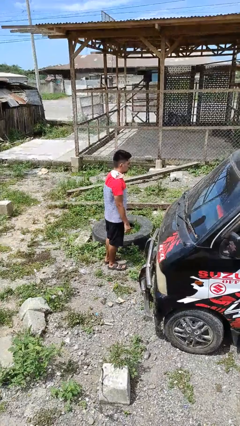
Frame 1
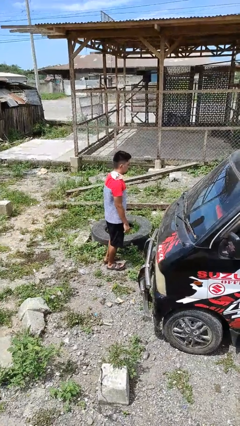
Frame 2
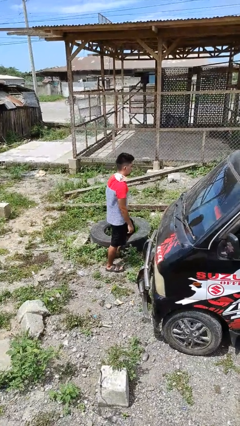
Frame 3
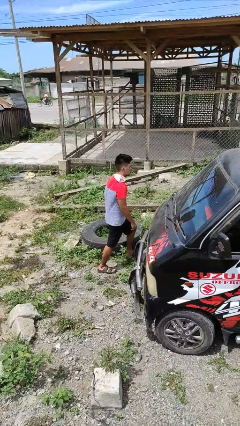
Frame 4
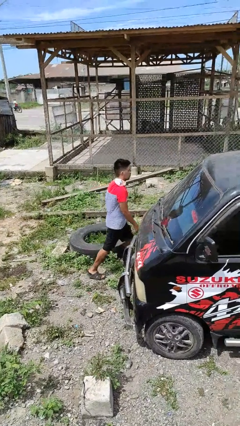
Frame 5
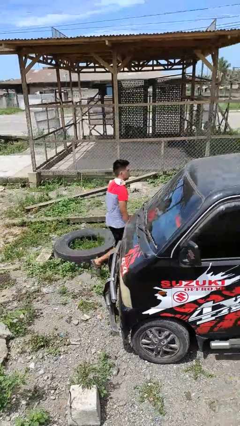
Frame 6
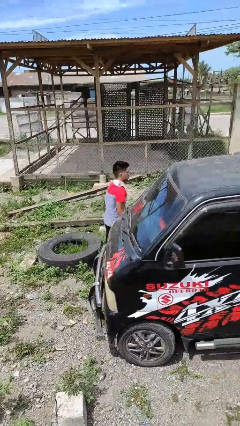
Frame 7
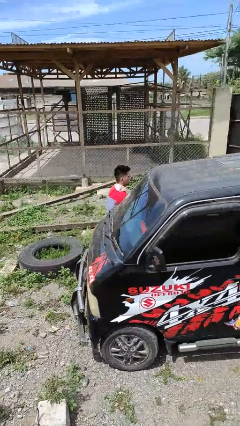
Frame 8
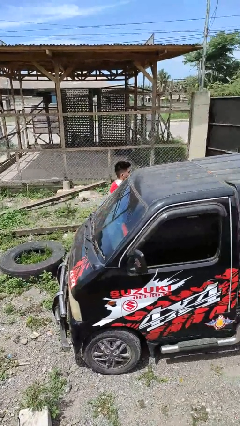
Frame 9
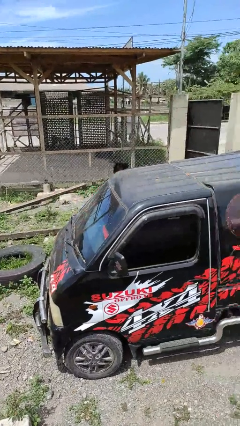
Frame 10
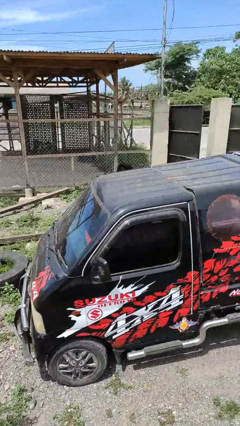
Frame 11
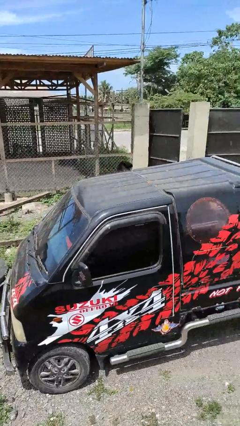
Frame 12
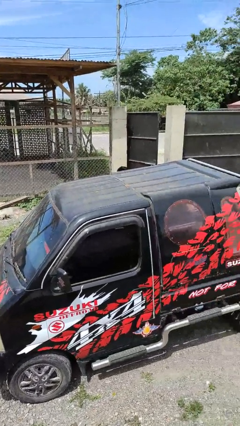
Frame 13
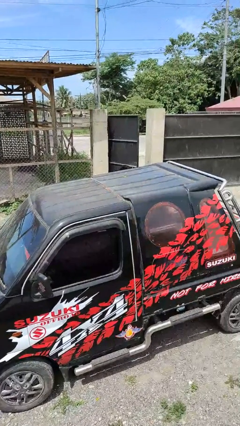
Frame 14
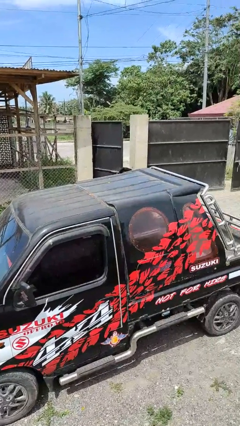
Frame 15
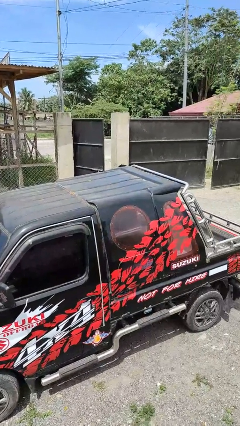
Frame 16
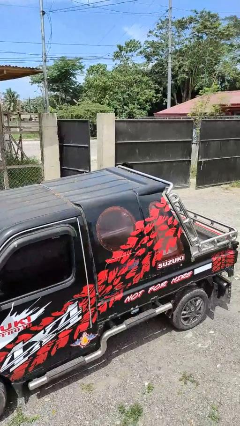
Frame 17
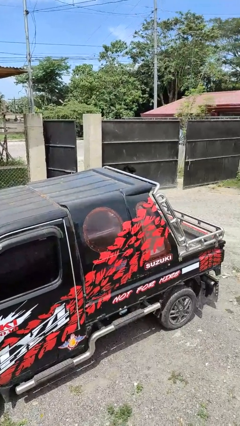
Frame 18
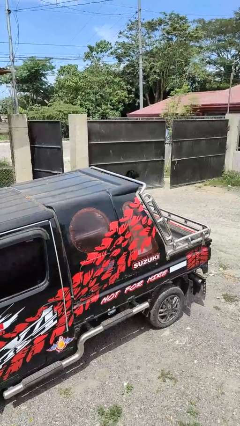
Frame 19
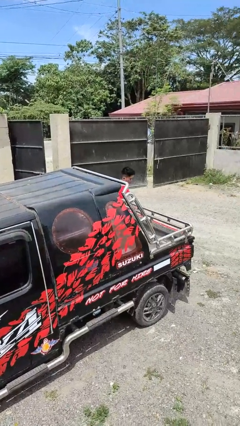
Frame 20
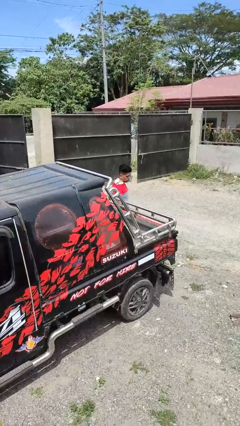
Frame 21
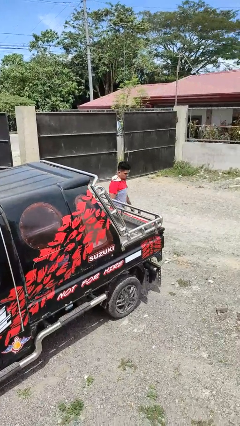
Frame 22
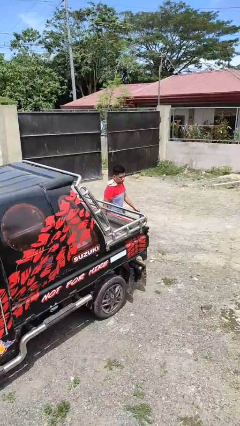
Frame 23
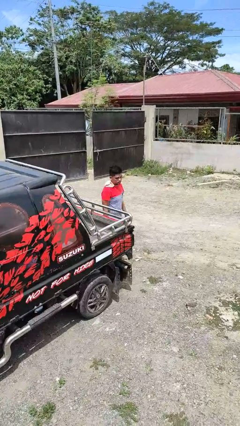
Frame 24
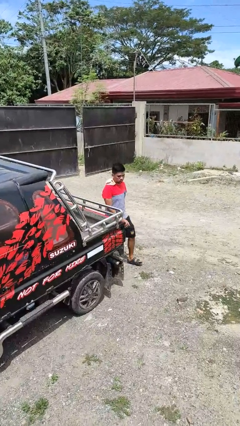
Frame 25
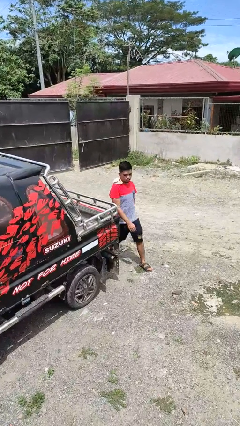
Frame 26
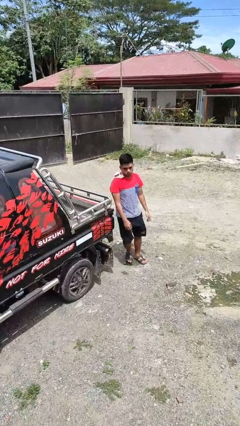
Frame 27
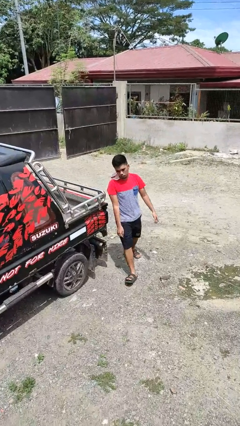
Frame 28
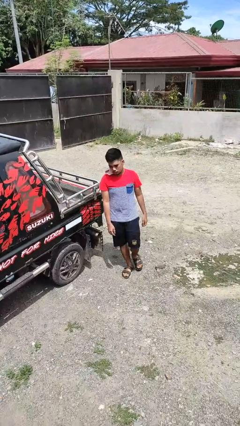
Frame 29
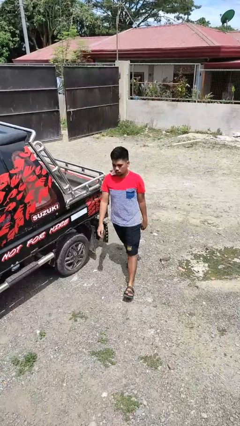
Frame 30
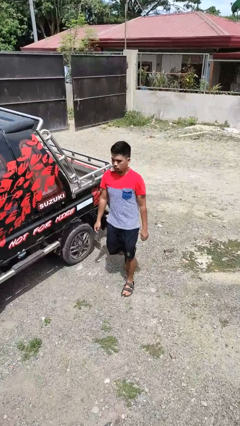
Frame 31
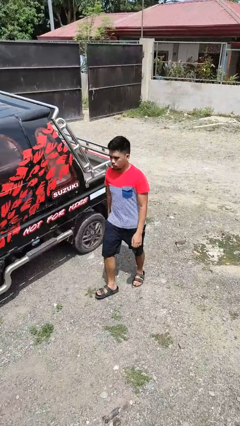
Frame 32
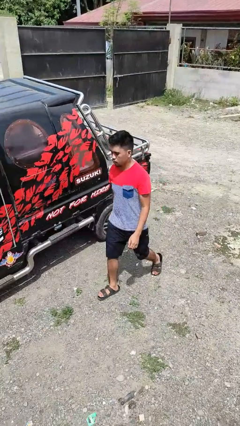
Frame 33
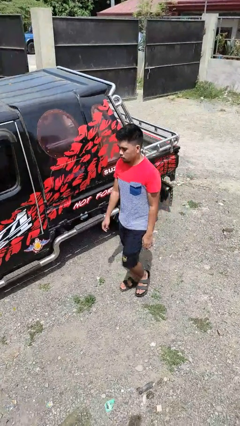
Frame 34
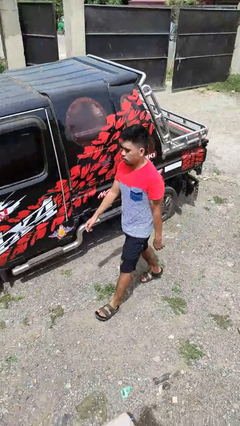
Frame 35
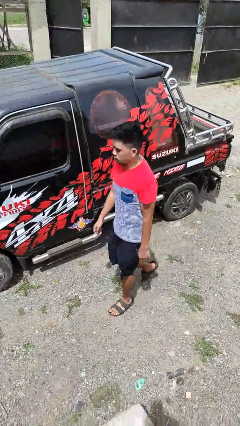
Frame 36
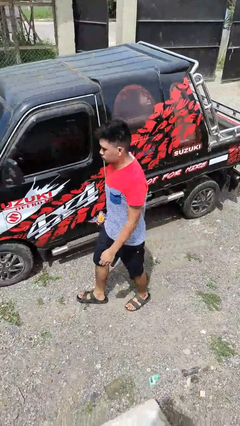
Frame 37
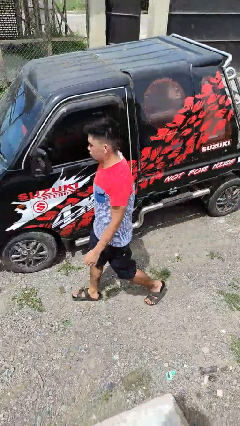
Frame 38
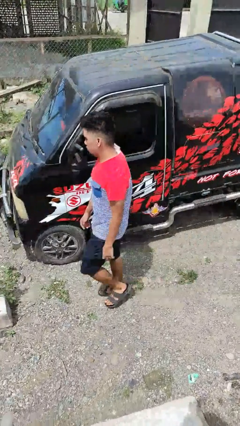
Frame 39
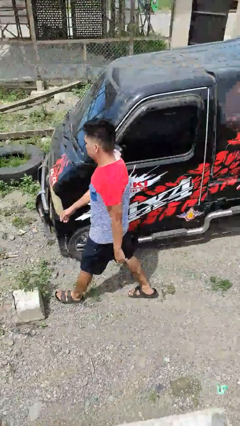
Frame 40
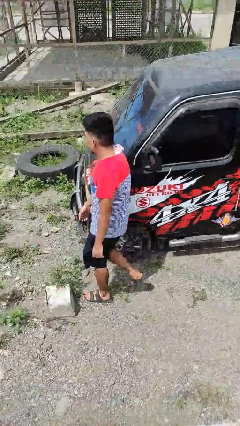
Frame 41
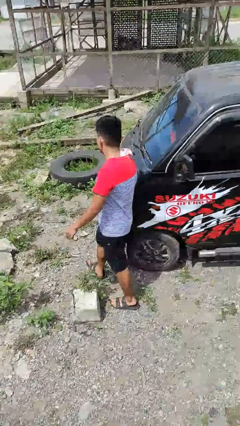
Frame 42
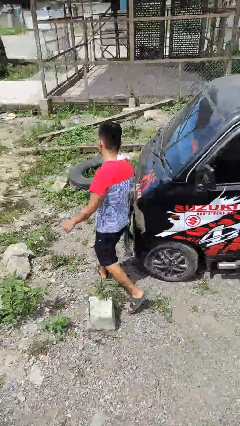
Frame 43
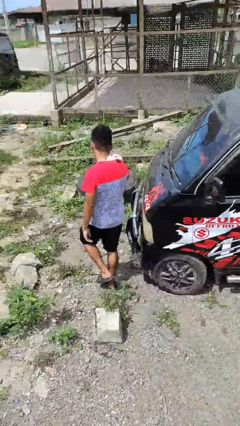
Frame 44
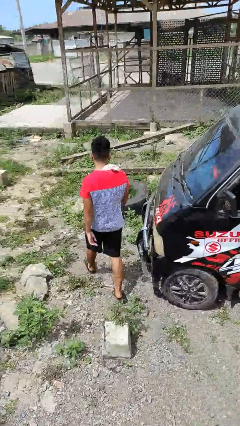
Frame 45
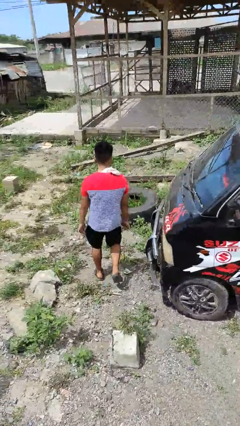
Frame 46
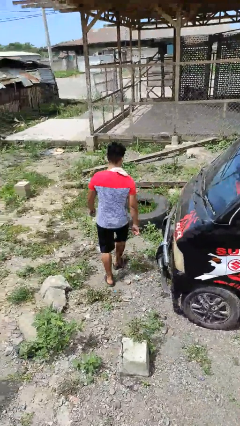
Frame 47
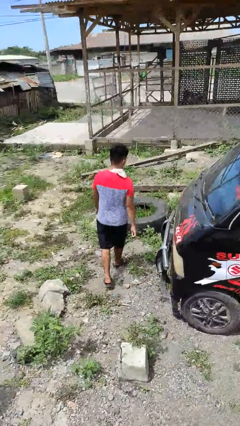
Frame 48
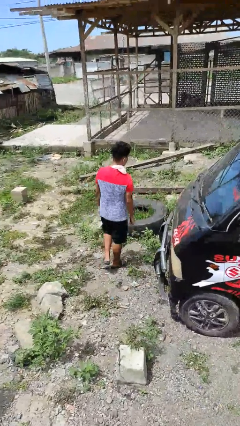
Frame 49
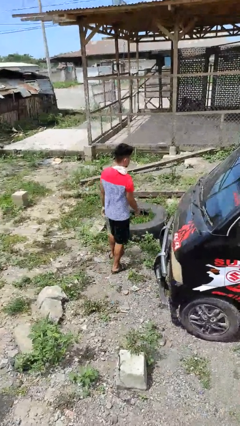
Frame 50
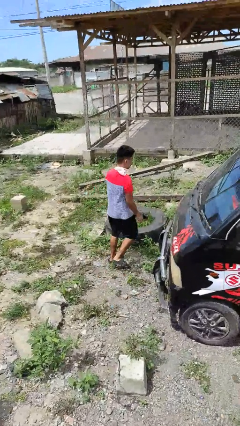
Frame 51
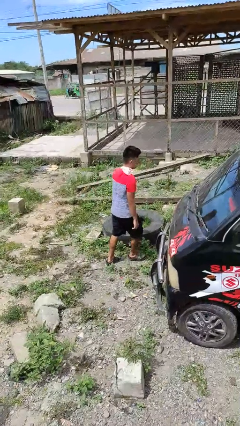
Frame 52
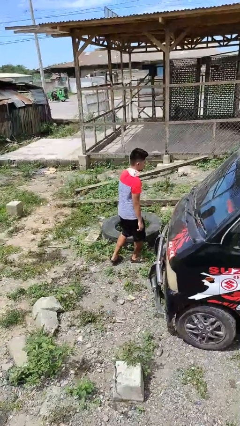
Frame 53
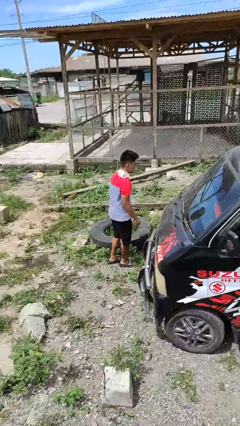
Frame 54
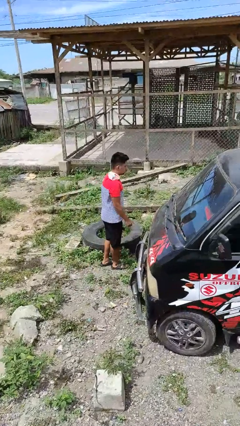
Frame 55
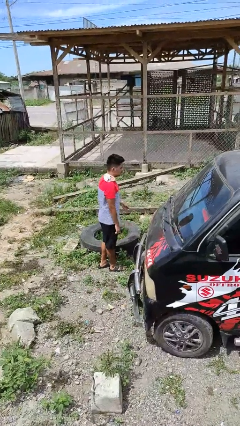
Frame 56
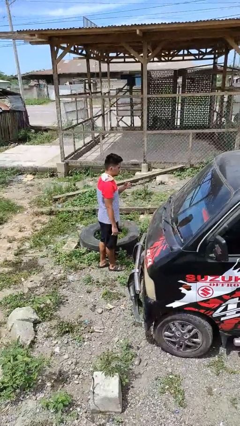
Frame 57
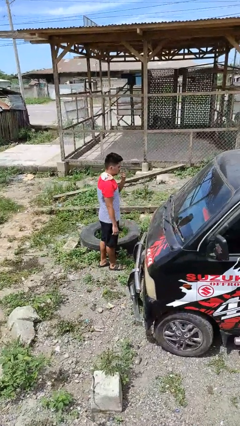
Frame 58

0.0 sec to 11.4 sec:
person walks around car

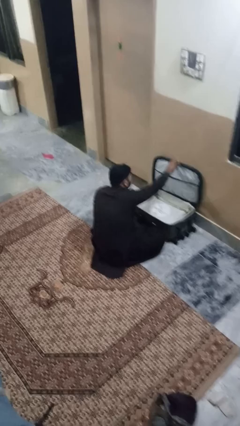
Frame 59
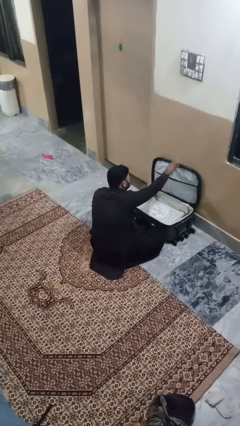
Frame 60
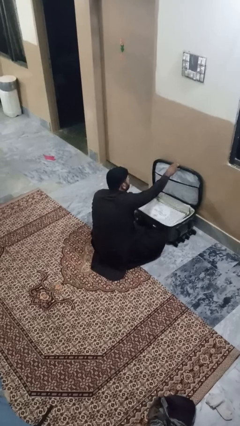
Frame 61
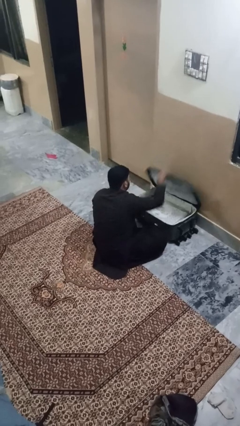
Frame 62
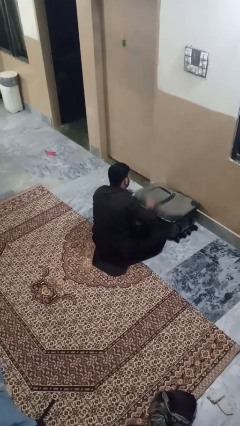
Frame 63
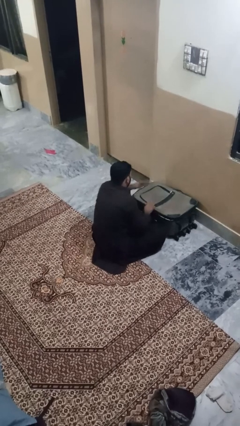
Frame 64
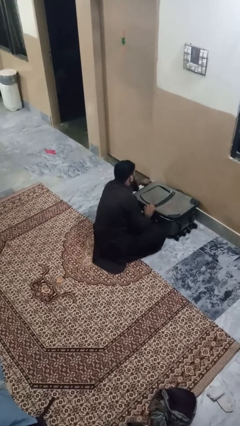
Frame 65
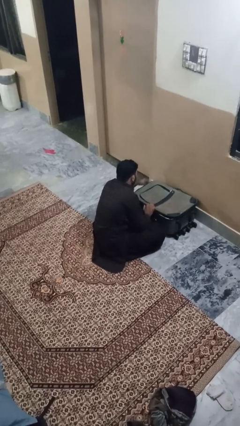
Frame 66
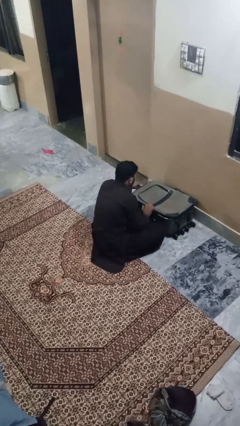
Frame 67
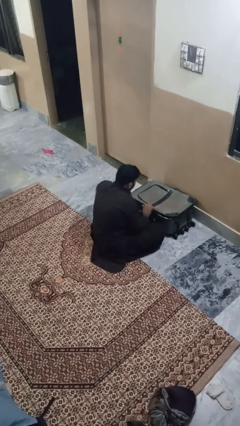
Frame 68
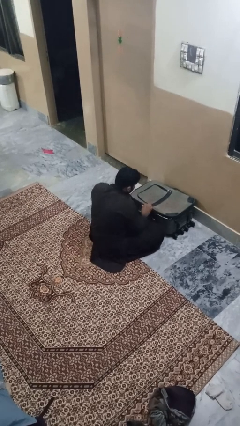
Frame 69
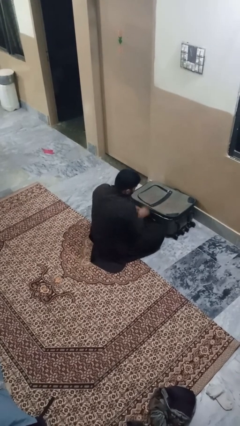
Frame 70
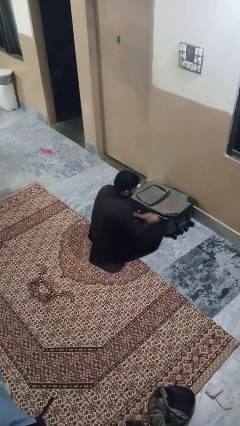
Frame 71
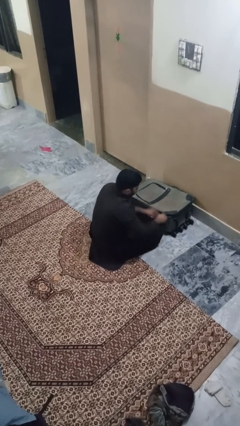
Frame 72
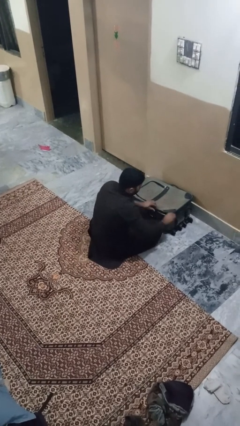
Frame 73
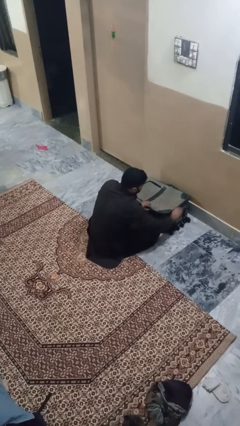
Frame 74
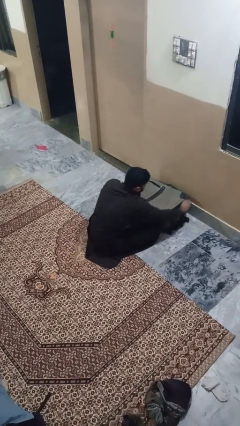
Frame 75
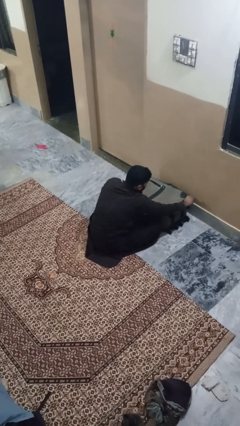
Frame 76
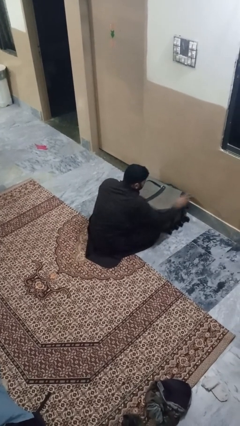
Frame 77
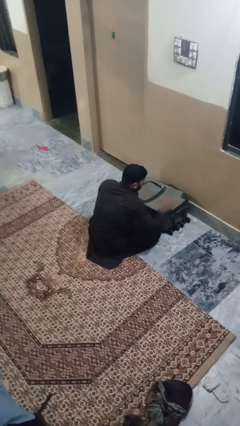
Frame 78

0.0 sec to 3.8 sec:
person closes suitcase

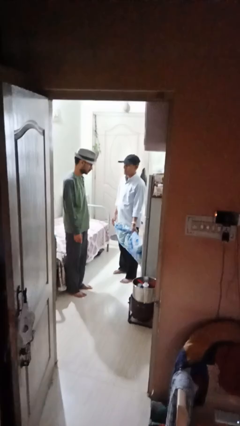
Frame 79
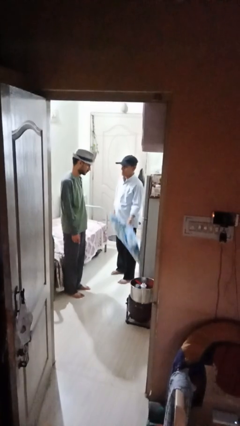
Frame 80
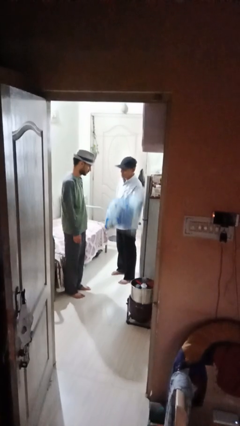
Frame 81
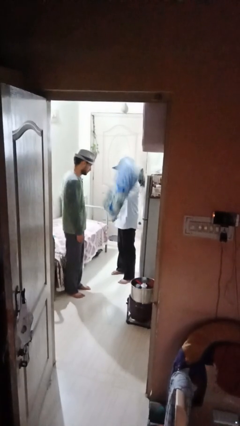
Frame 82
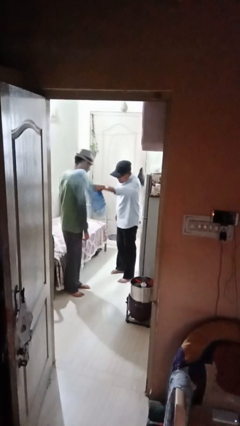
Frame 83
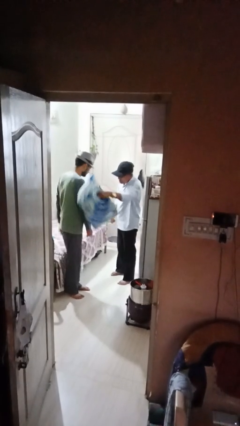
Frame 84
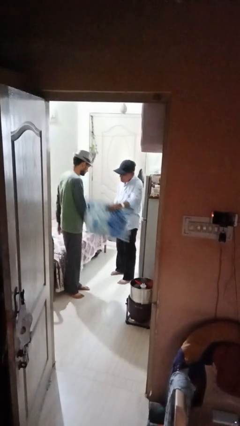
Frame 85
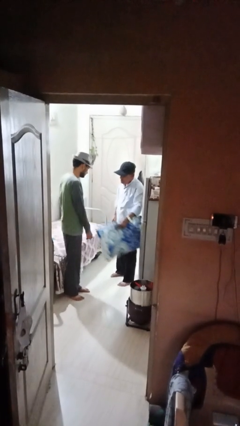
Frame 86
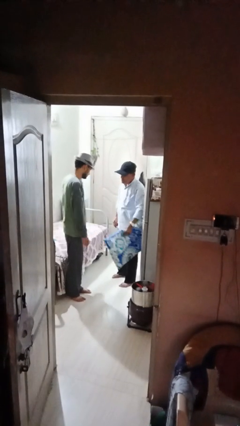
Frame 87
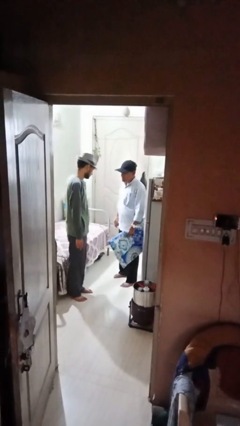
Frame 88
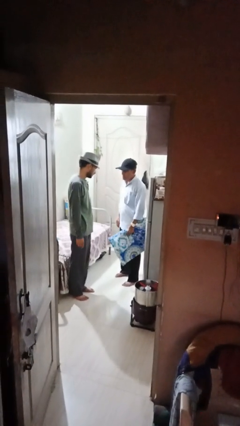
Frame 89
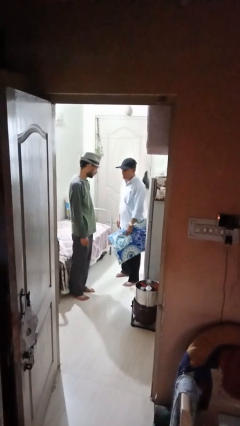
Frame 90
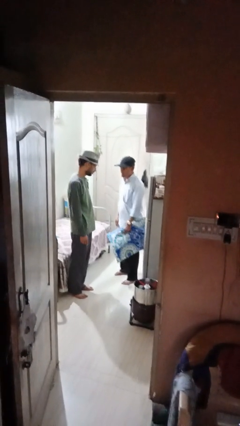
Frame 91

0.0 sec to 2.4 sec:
person hits person with pillow
